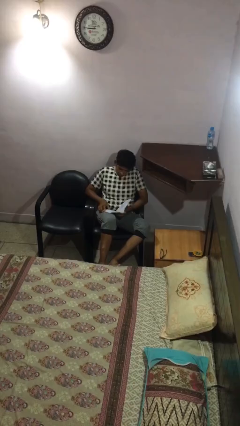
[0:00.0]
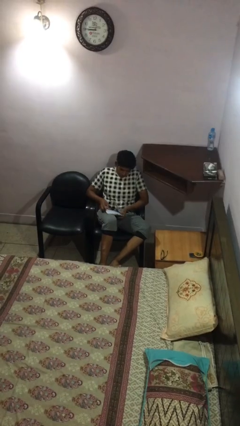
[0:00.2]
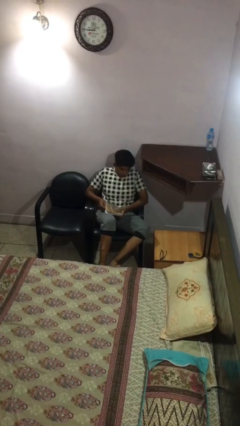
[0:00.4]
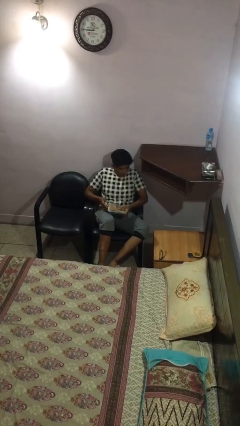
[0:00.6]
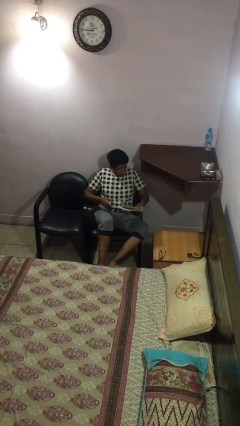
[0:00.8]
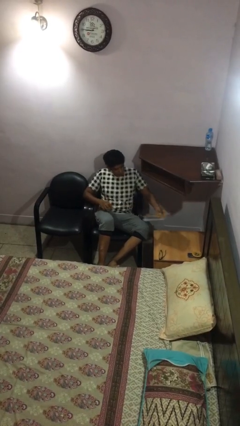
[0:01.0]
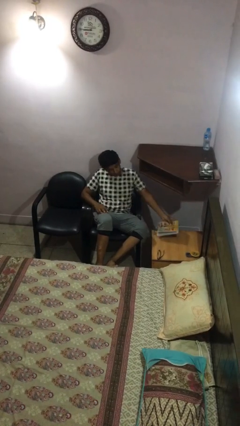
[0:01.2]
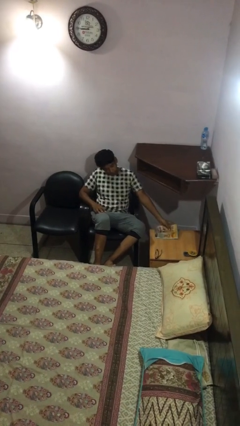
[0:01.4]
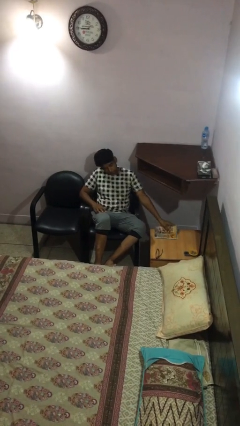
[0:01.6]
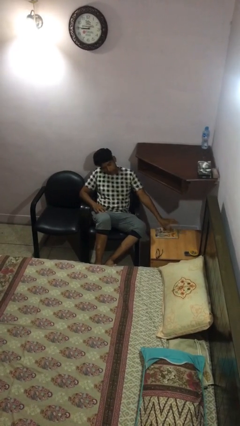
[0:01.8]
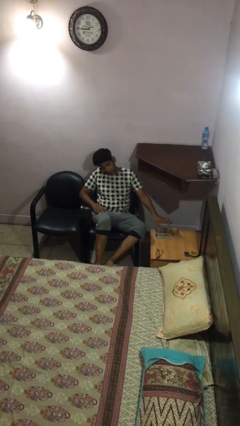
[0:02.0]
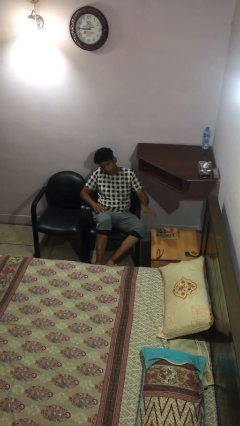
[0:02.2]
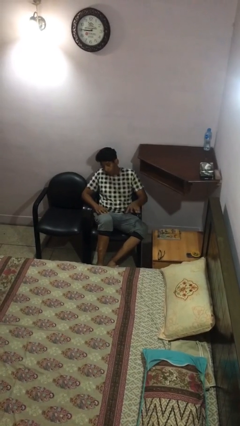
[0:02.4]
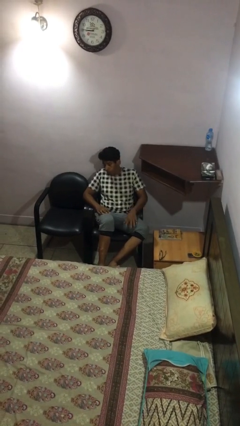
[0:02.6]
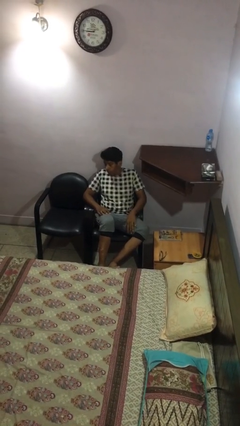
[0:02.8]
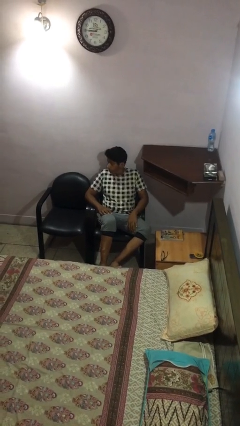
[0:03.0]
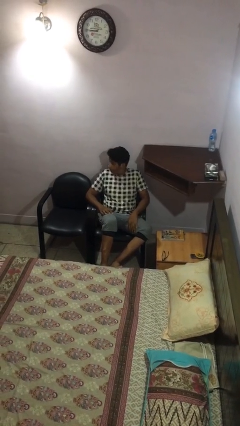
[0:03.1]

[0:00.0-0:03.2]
person puts down object on table

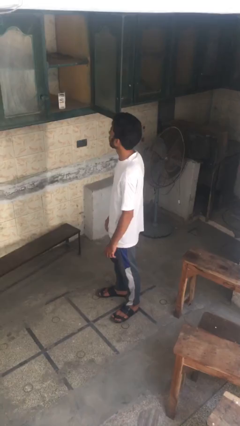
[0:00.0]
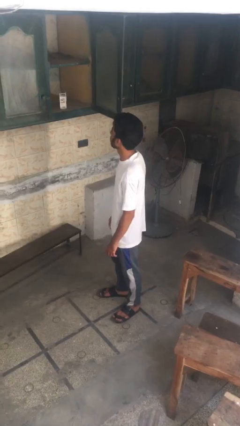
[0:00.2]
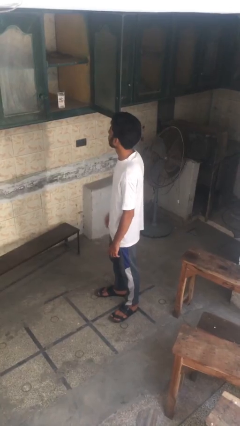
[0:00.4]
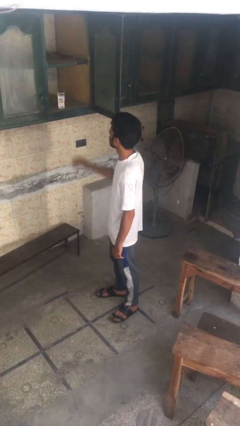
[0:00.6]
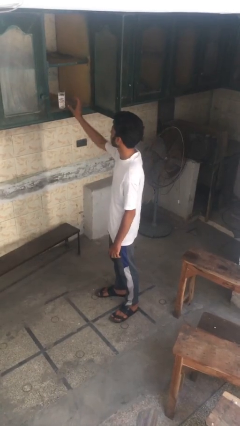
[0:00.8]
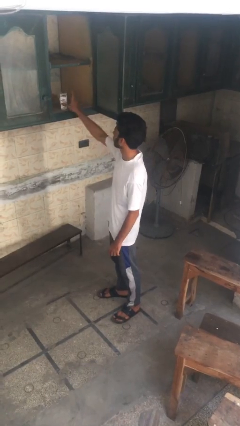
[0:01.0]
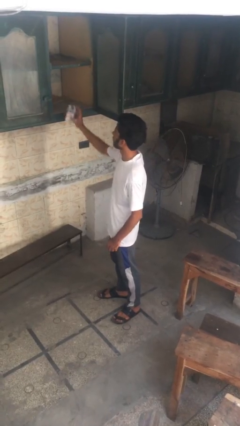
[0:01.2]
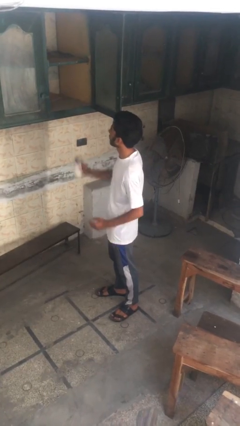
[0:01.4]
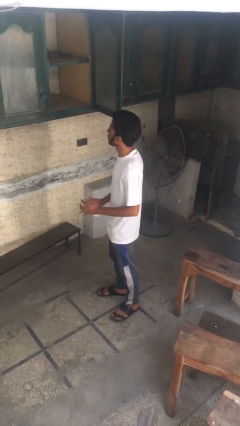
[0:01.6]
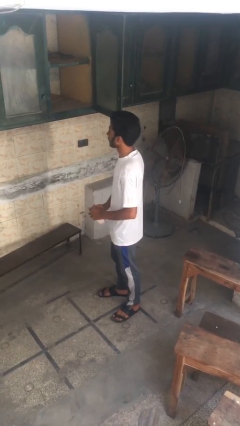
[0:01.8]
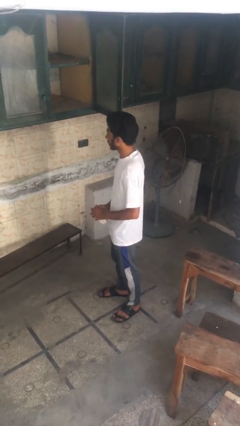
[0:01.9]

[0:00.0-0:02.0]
person takes object from cabinet

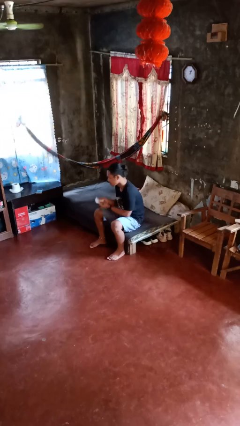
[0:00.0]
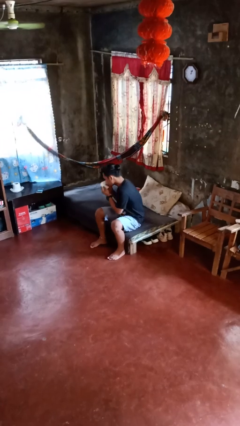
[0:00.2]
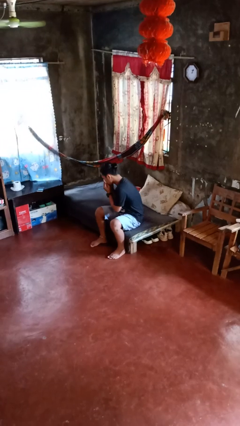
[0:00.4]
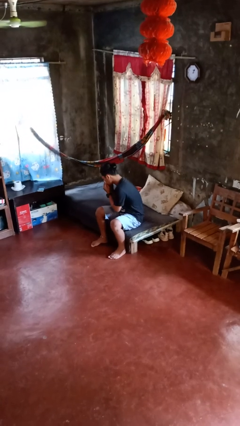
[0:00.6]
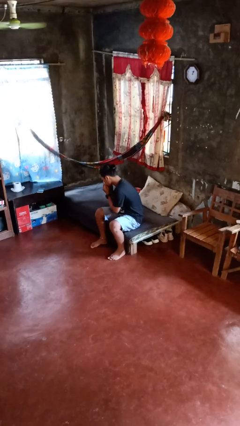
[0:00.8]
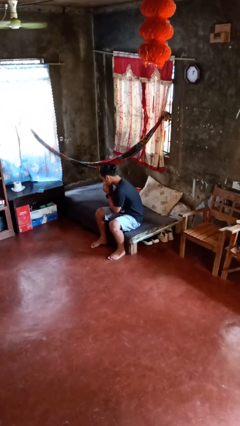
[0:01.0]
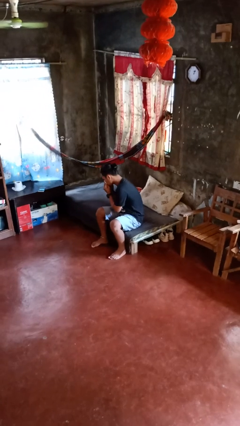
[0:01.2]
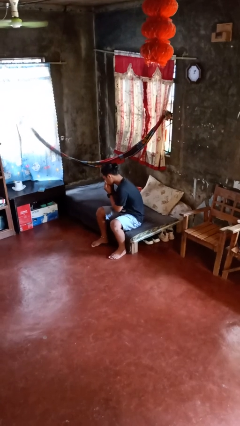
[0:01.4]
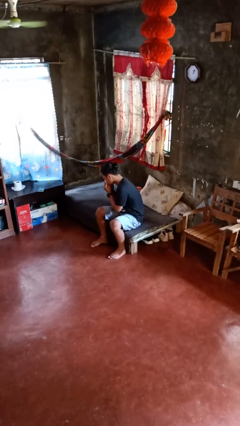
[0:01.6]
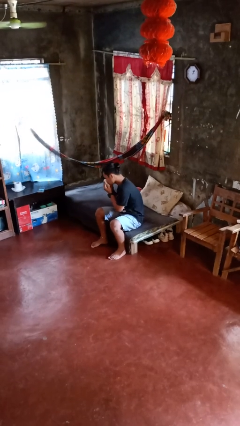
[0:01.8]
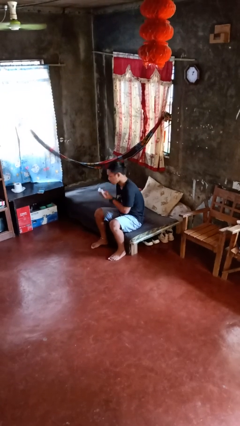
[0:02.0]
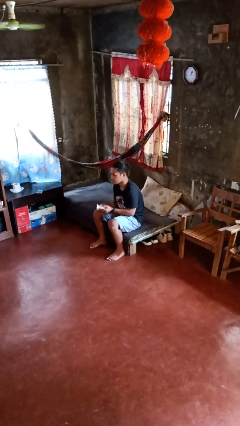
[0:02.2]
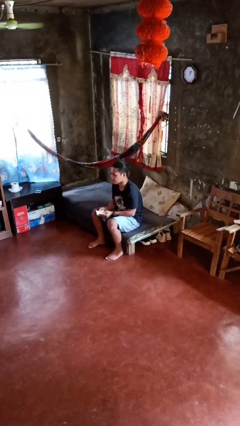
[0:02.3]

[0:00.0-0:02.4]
person blows nose

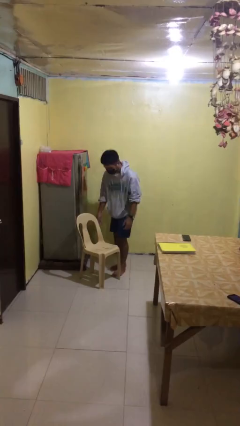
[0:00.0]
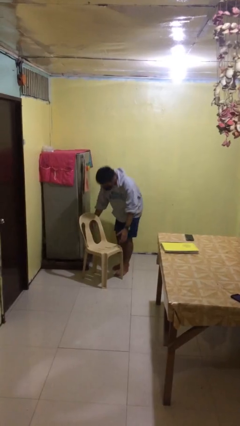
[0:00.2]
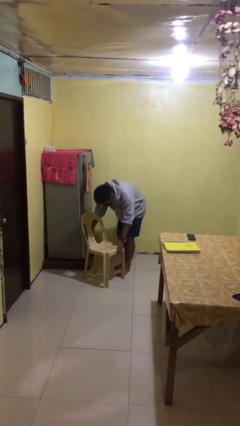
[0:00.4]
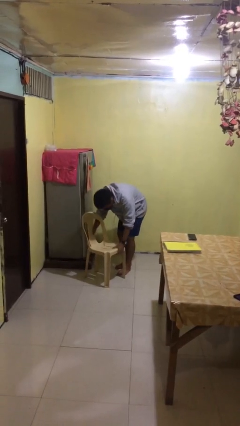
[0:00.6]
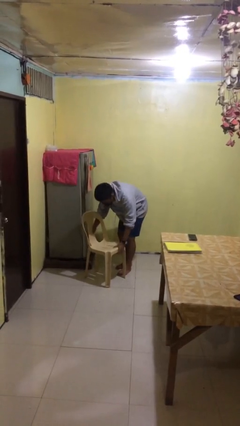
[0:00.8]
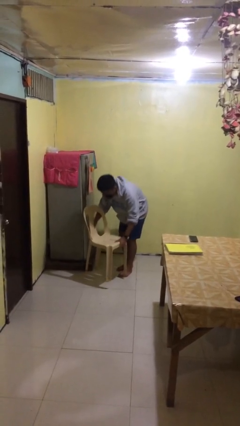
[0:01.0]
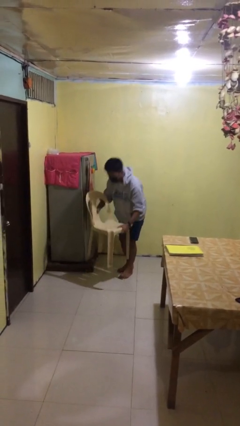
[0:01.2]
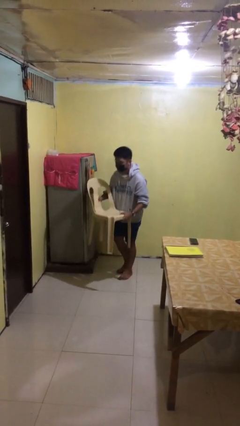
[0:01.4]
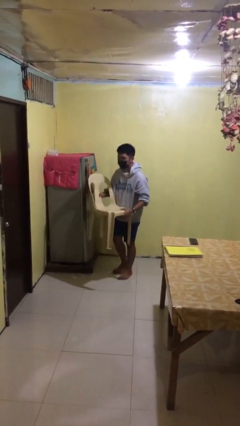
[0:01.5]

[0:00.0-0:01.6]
person picks up object from floor

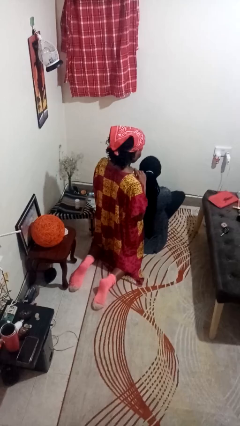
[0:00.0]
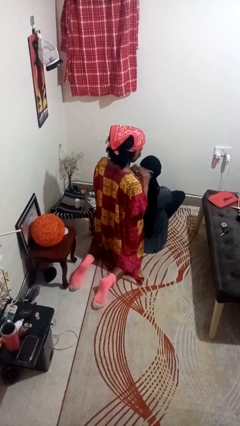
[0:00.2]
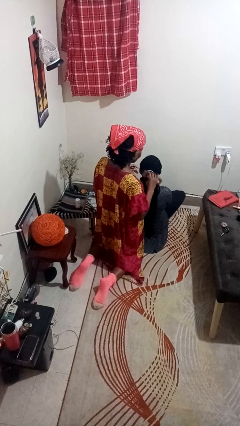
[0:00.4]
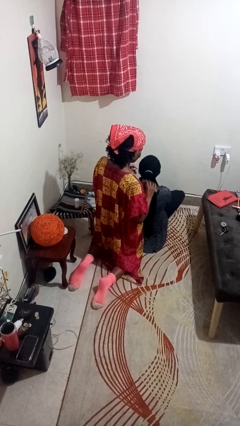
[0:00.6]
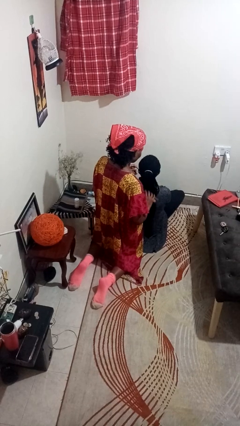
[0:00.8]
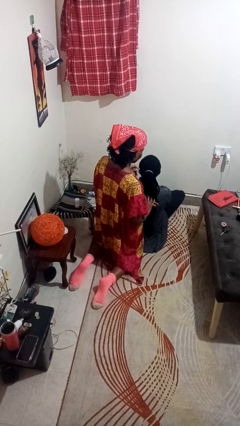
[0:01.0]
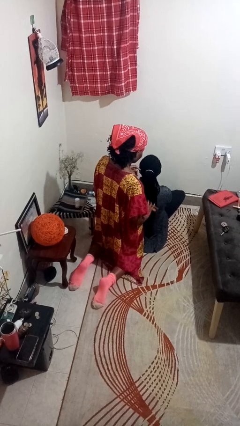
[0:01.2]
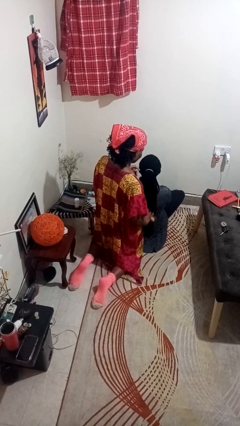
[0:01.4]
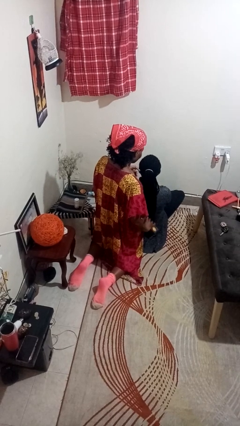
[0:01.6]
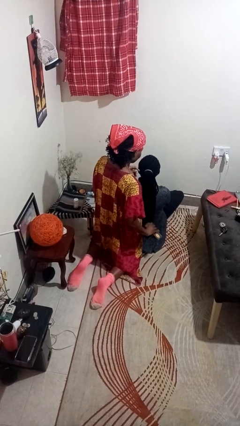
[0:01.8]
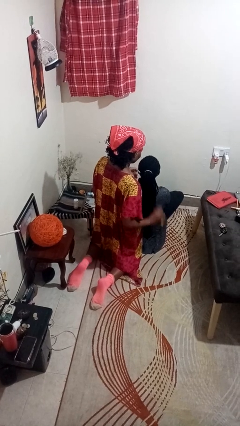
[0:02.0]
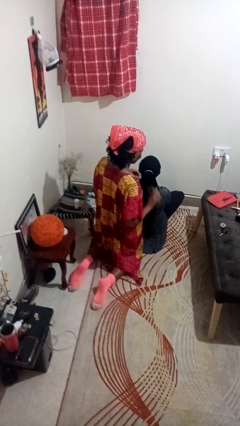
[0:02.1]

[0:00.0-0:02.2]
person brushes hair of person

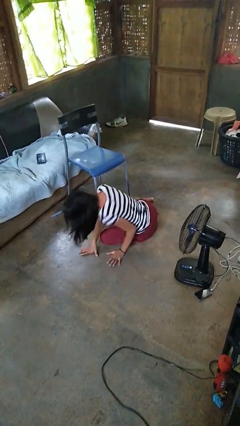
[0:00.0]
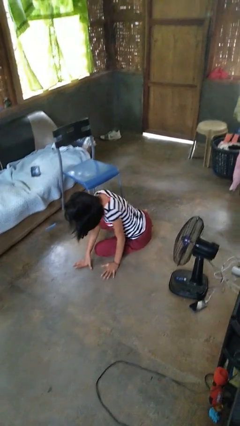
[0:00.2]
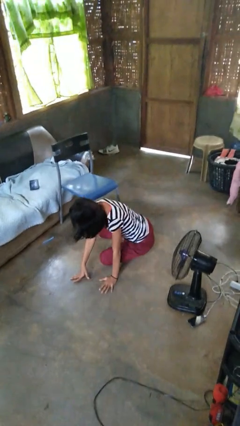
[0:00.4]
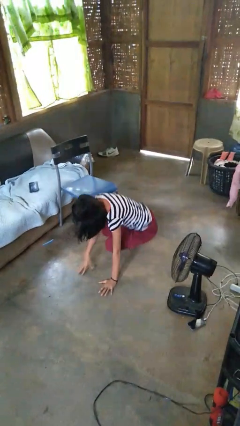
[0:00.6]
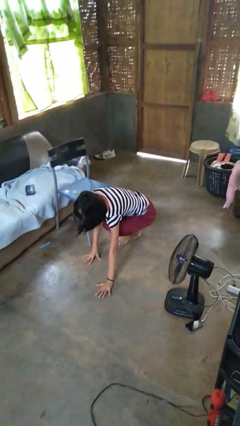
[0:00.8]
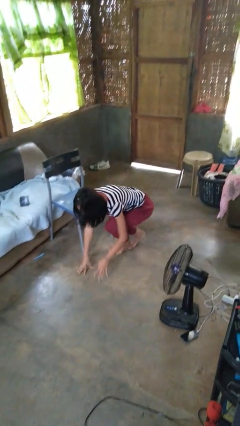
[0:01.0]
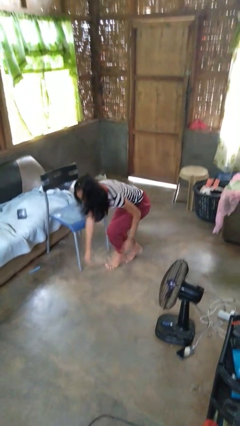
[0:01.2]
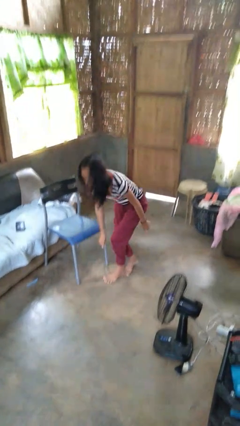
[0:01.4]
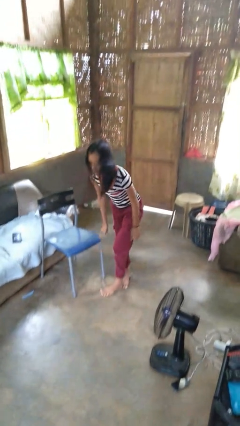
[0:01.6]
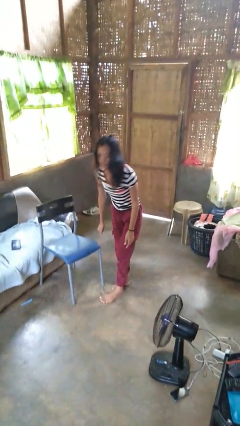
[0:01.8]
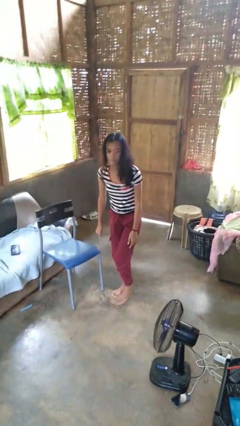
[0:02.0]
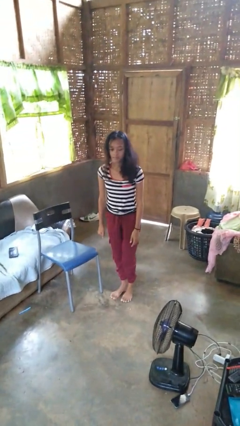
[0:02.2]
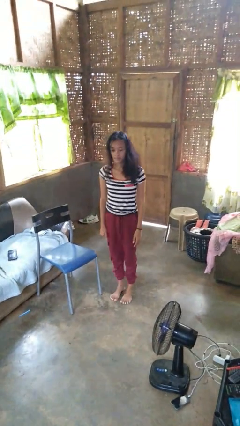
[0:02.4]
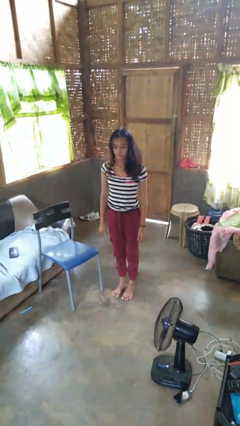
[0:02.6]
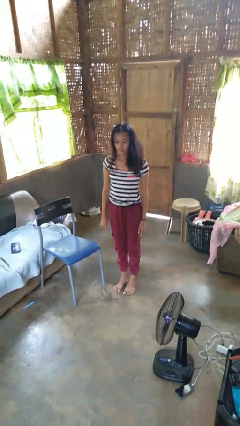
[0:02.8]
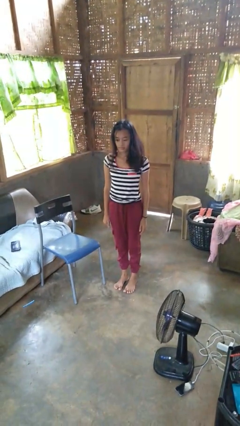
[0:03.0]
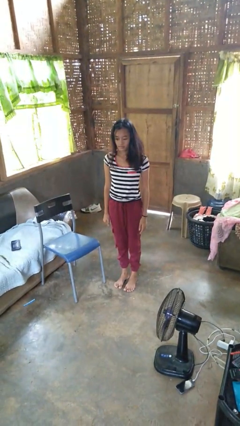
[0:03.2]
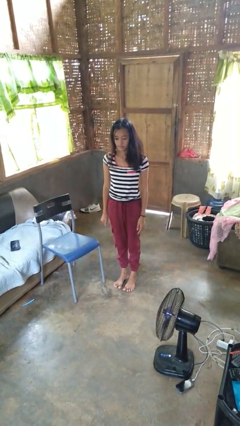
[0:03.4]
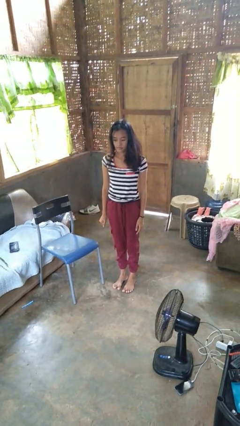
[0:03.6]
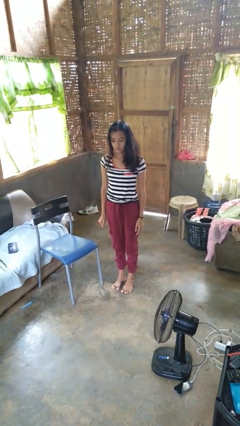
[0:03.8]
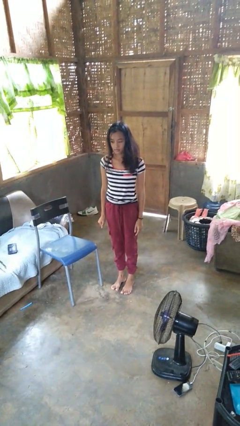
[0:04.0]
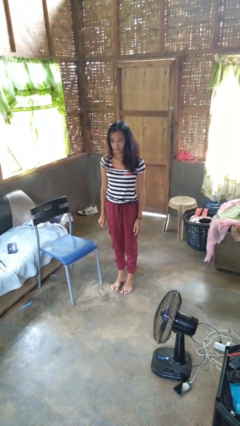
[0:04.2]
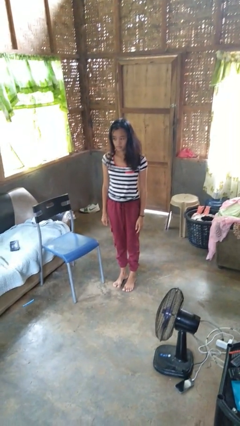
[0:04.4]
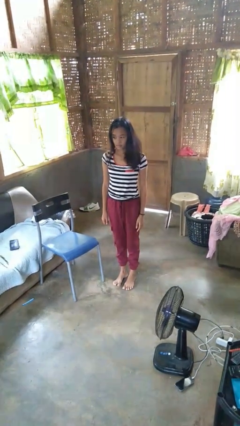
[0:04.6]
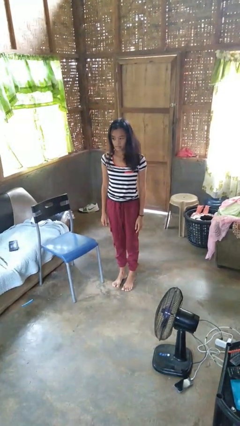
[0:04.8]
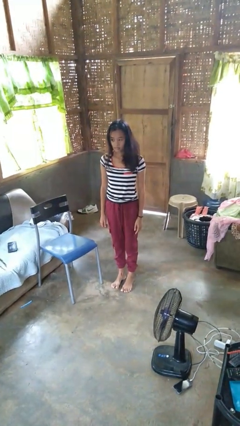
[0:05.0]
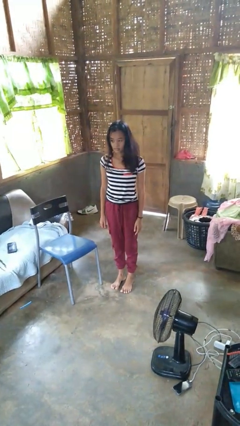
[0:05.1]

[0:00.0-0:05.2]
person stands up from floor

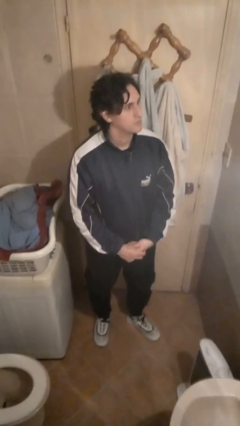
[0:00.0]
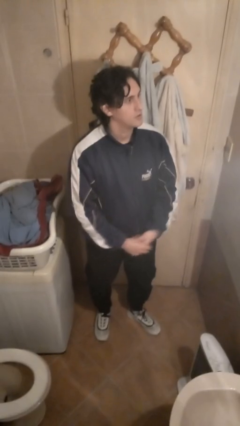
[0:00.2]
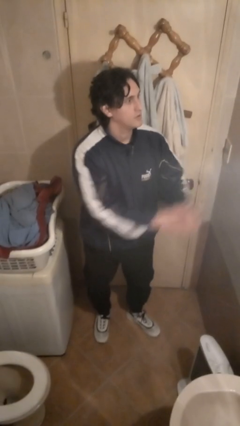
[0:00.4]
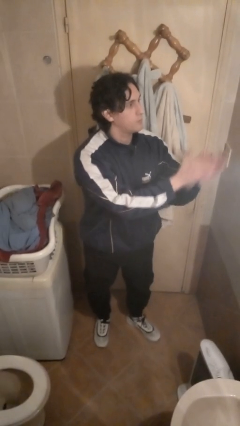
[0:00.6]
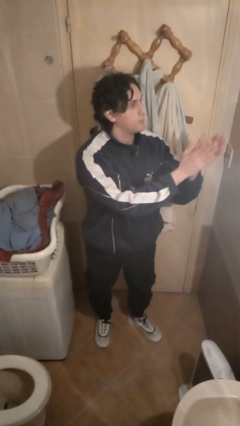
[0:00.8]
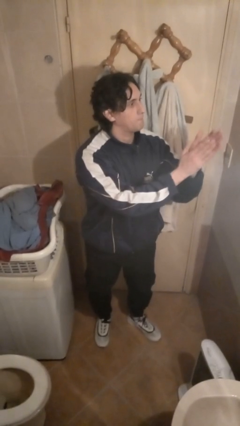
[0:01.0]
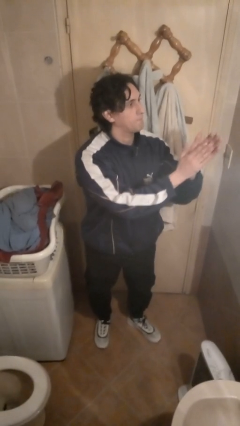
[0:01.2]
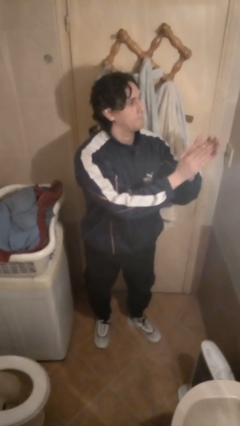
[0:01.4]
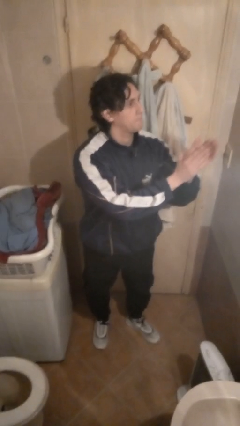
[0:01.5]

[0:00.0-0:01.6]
person claps hands
